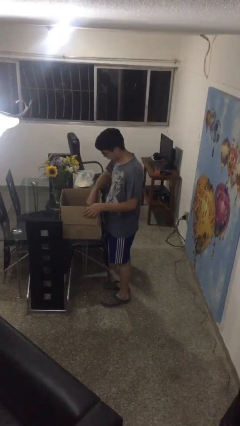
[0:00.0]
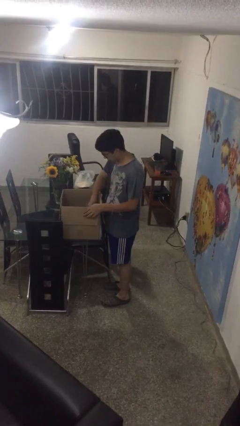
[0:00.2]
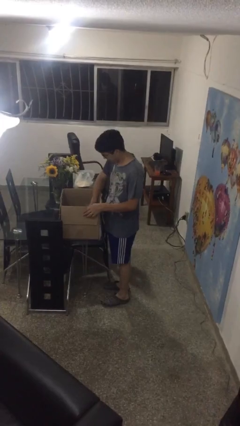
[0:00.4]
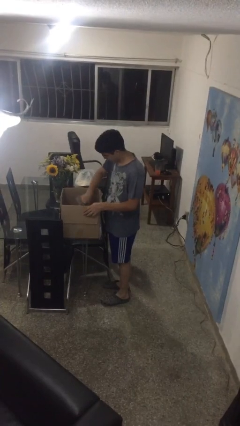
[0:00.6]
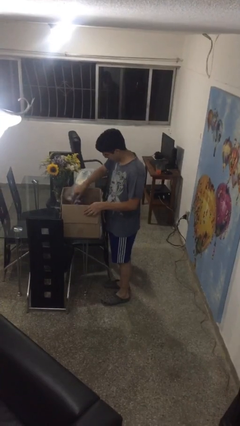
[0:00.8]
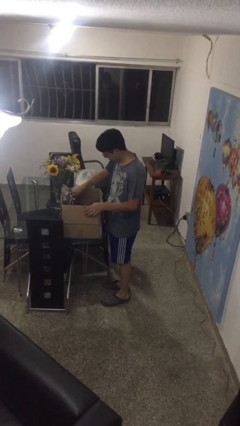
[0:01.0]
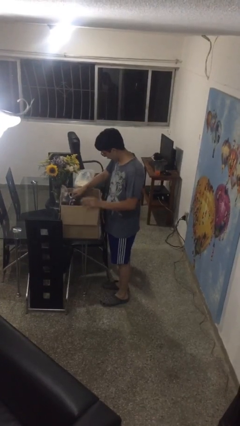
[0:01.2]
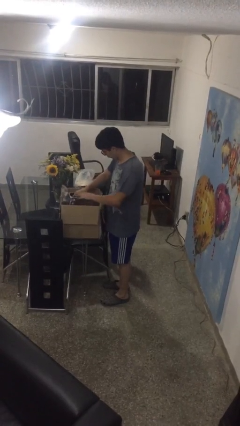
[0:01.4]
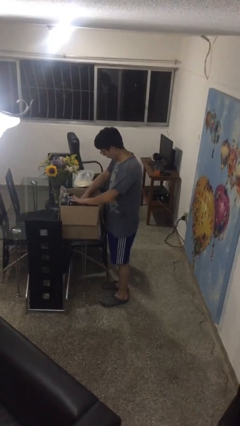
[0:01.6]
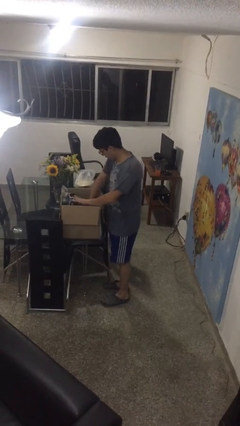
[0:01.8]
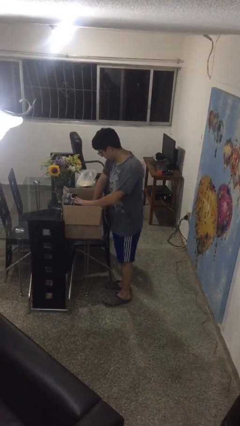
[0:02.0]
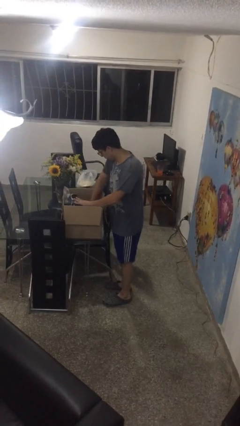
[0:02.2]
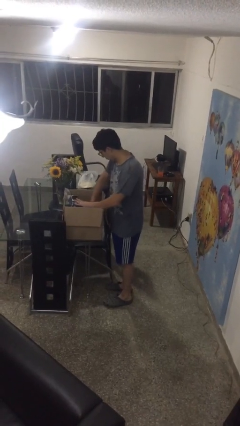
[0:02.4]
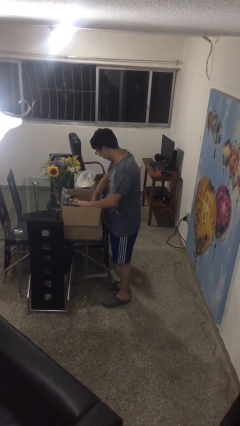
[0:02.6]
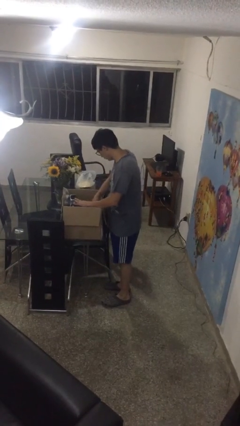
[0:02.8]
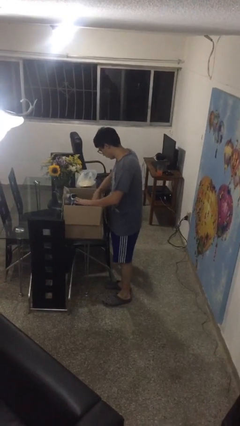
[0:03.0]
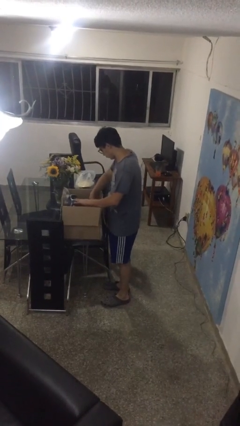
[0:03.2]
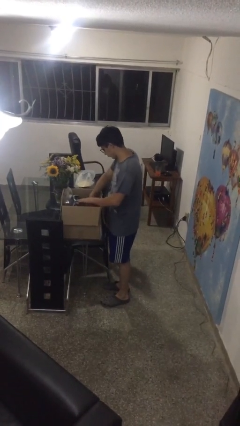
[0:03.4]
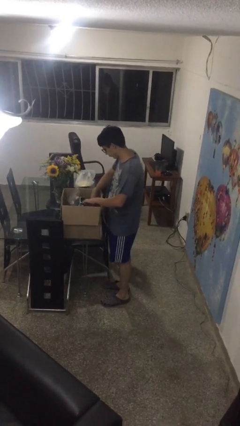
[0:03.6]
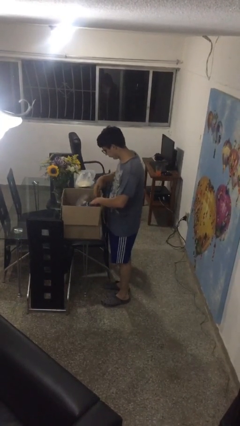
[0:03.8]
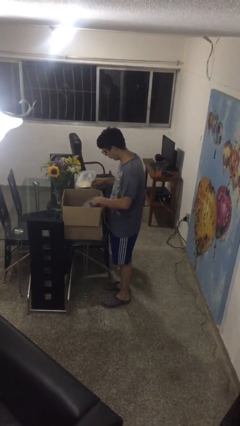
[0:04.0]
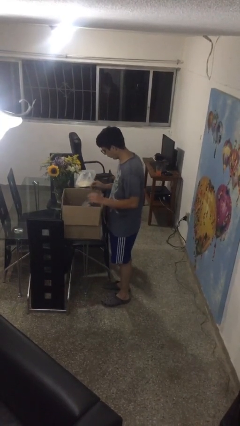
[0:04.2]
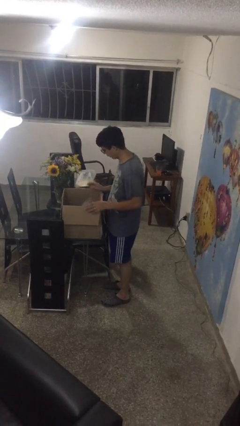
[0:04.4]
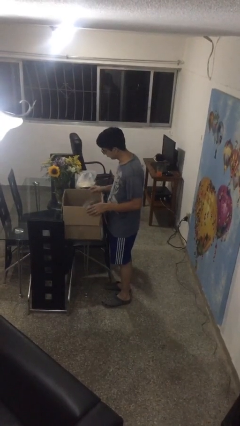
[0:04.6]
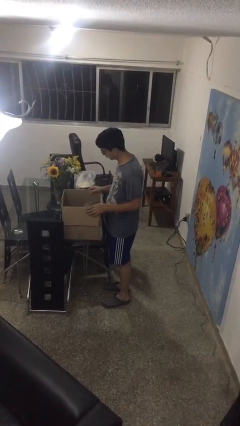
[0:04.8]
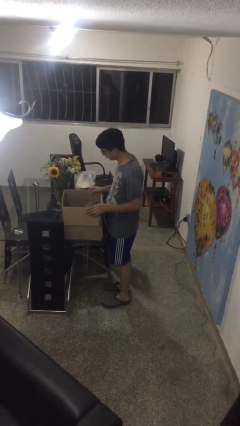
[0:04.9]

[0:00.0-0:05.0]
person searches in box

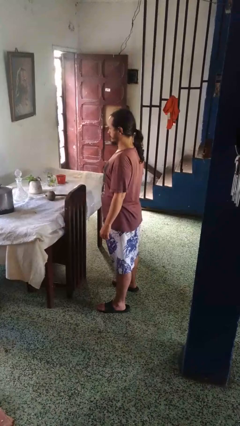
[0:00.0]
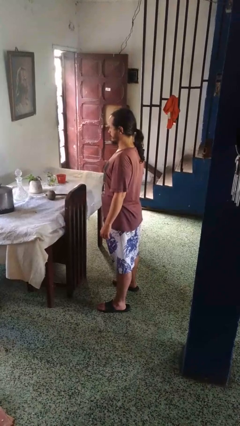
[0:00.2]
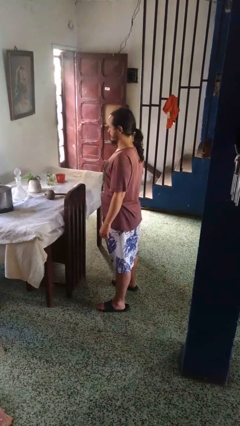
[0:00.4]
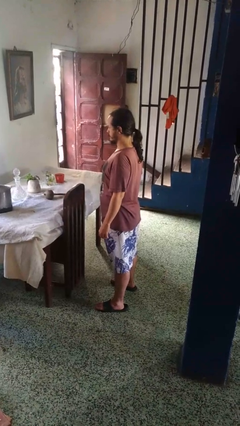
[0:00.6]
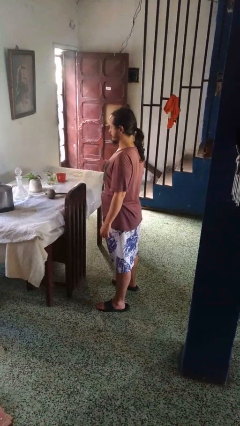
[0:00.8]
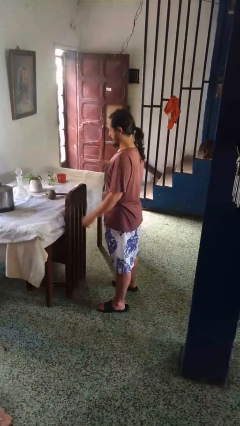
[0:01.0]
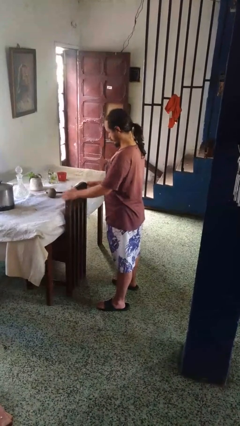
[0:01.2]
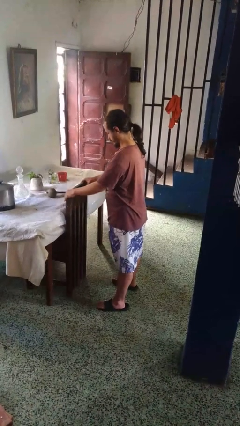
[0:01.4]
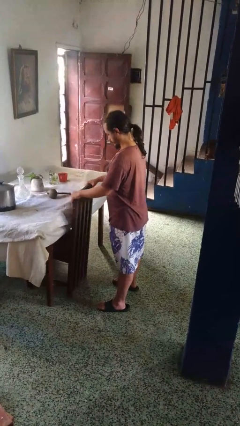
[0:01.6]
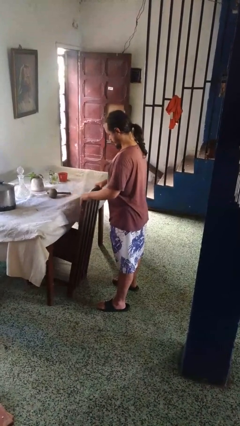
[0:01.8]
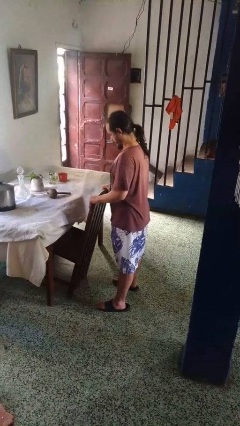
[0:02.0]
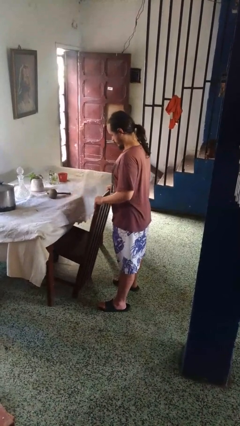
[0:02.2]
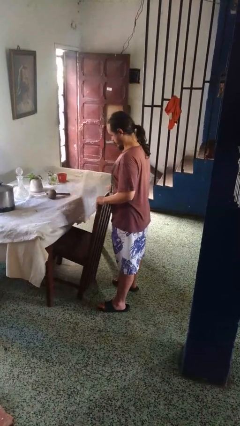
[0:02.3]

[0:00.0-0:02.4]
person pulls out chair

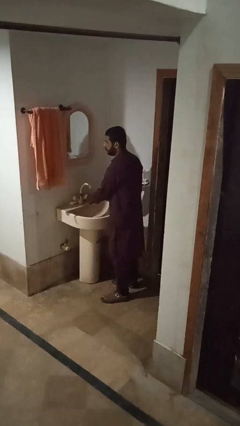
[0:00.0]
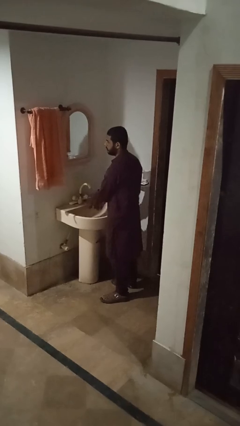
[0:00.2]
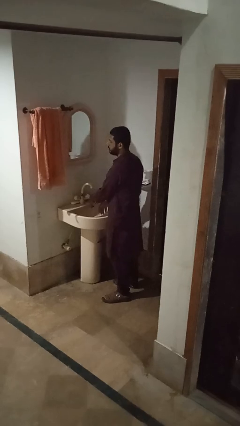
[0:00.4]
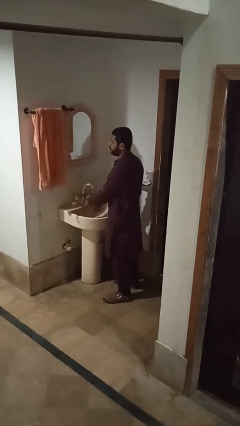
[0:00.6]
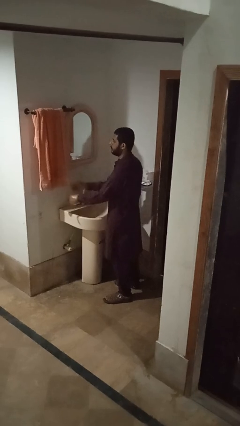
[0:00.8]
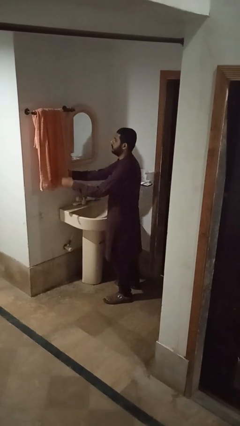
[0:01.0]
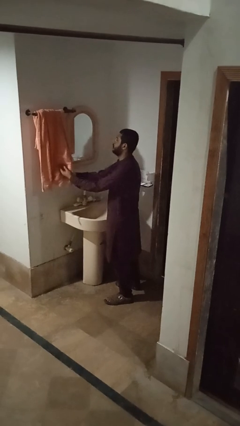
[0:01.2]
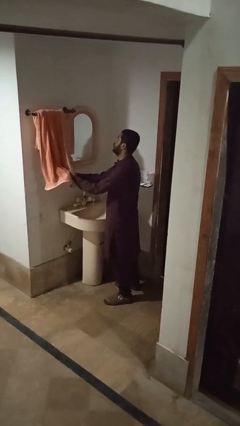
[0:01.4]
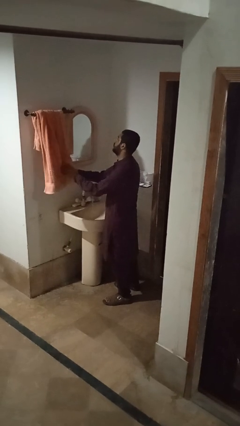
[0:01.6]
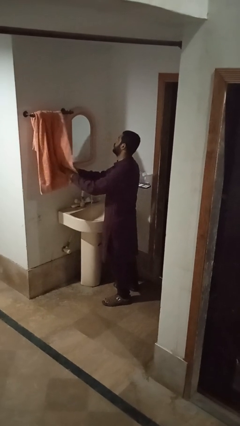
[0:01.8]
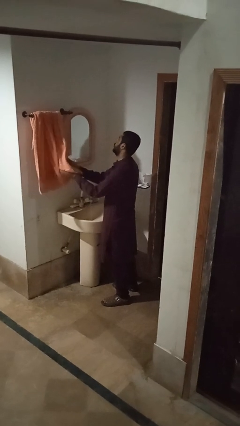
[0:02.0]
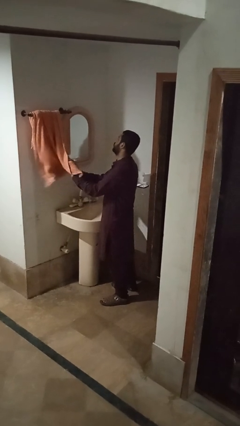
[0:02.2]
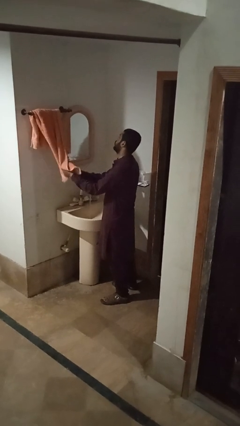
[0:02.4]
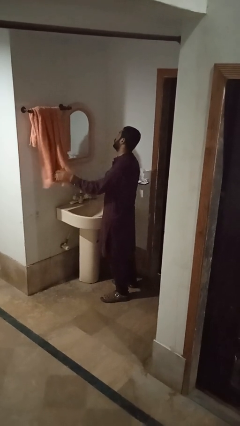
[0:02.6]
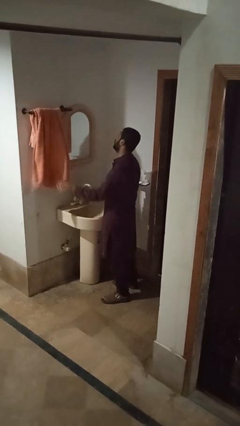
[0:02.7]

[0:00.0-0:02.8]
person dries hands with towel

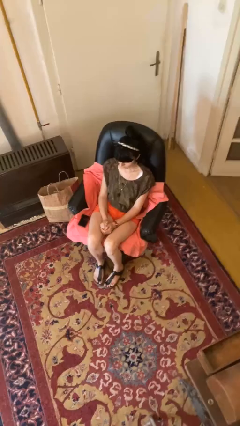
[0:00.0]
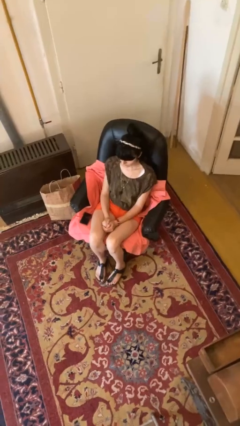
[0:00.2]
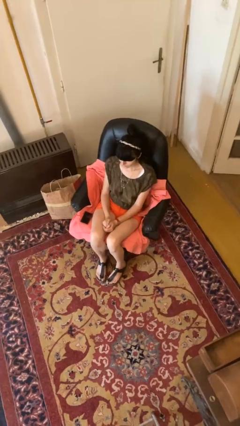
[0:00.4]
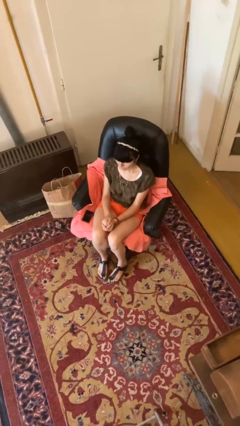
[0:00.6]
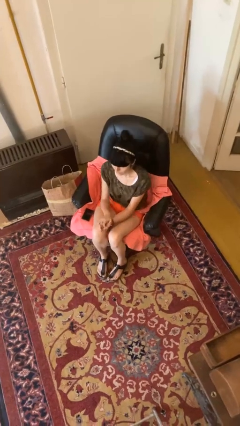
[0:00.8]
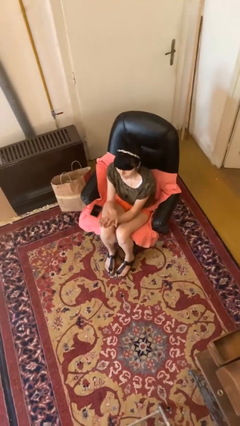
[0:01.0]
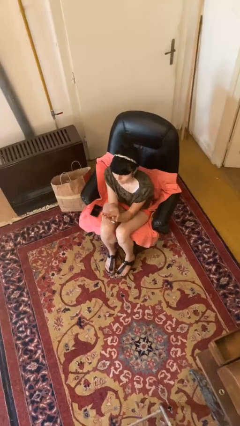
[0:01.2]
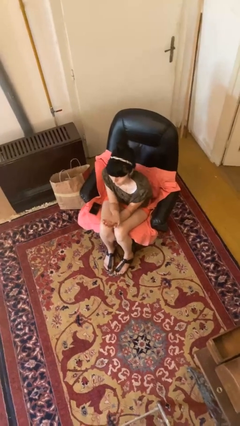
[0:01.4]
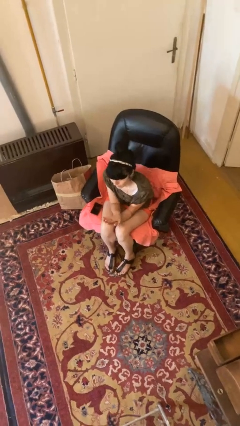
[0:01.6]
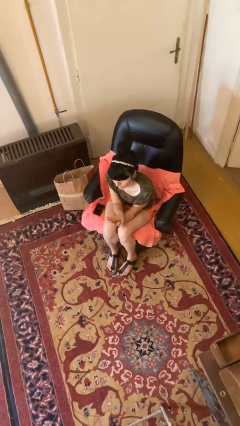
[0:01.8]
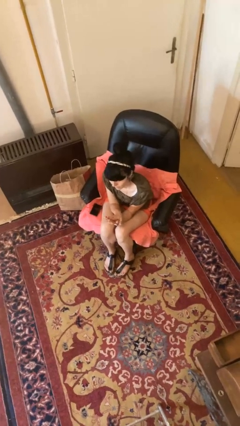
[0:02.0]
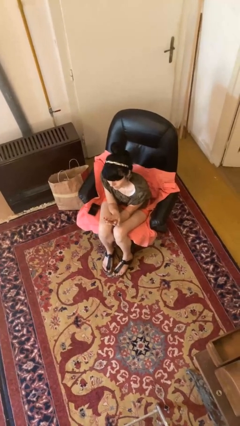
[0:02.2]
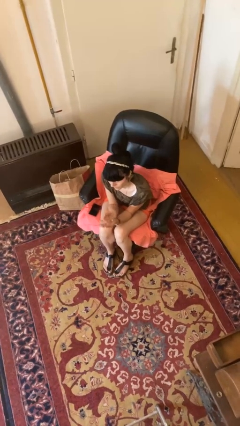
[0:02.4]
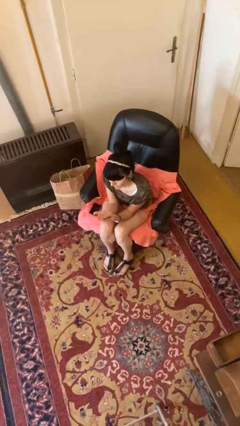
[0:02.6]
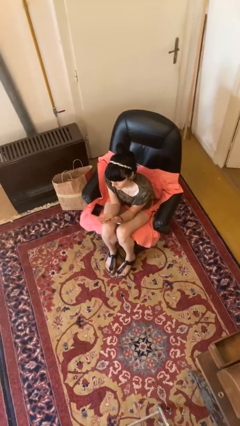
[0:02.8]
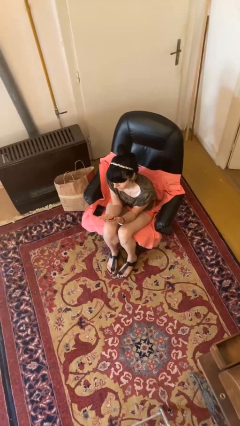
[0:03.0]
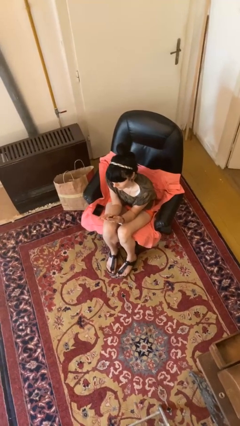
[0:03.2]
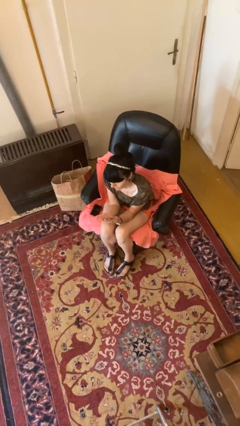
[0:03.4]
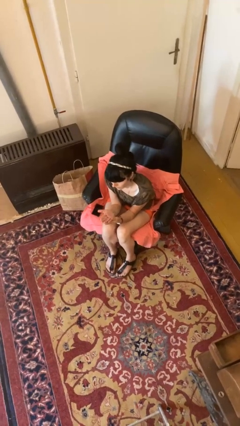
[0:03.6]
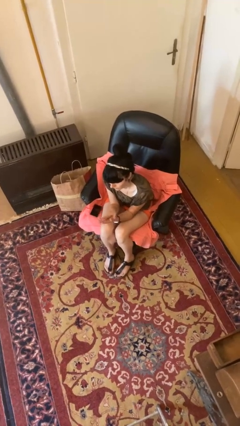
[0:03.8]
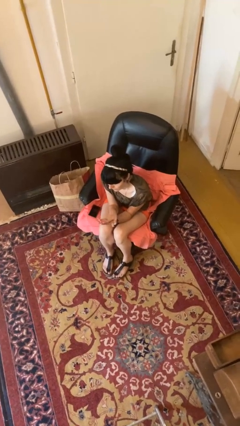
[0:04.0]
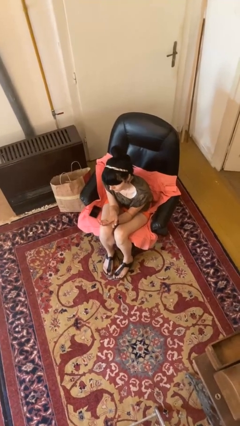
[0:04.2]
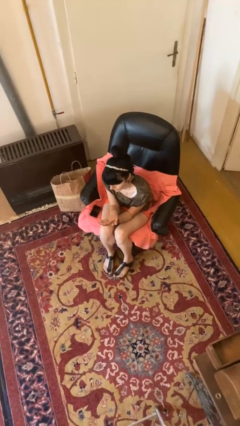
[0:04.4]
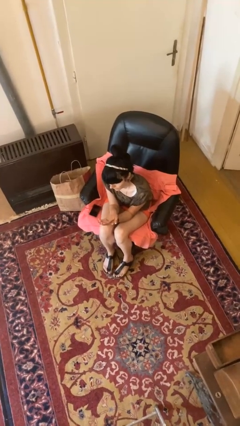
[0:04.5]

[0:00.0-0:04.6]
person looks at hands in lap

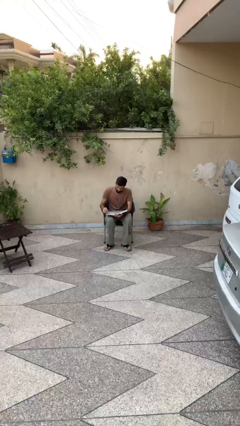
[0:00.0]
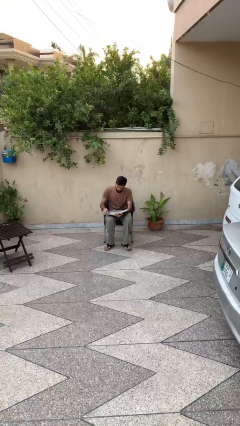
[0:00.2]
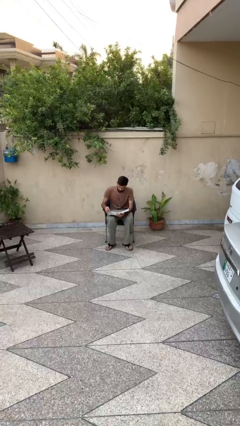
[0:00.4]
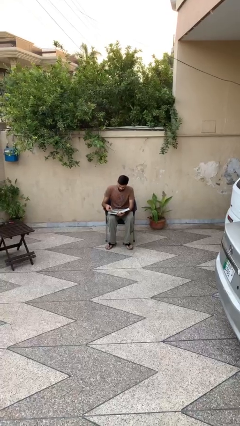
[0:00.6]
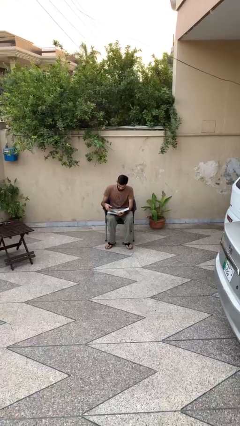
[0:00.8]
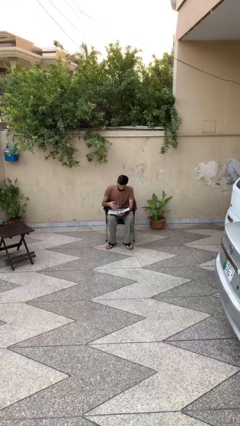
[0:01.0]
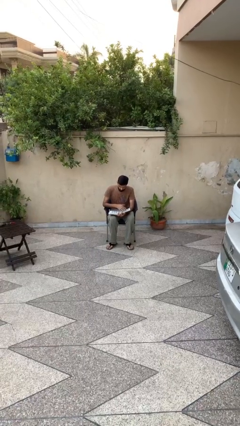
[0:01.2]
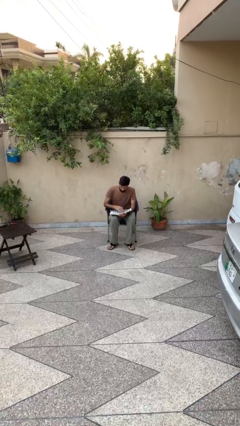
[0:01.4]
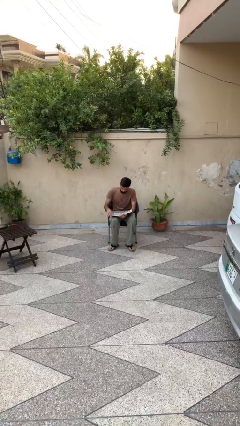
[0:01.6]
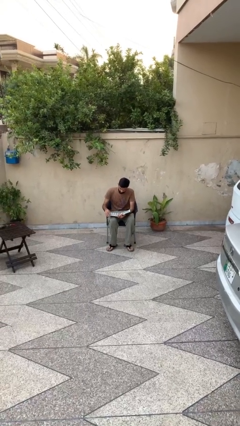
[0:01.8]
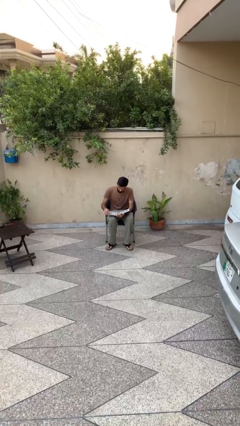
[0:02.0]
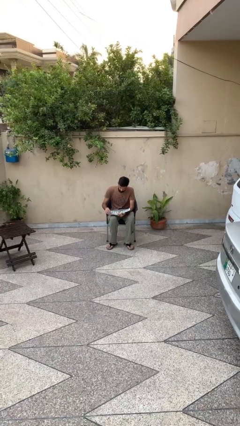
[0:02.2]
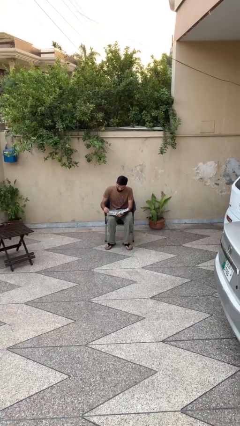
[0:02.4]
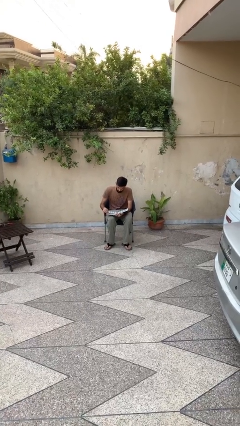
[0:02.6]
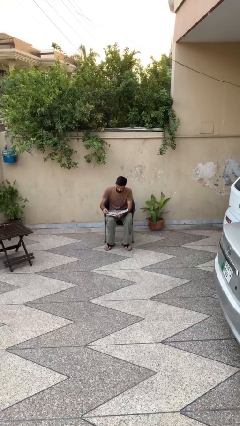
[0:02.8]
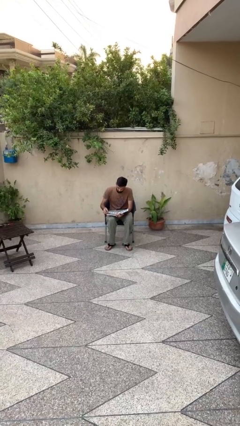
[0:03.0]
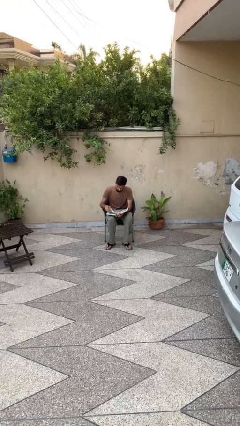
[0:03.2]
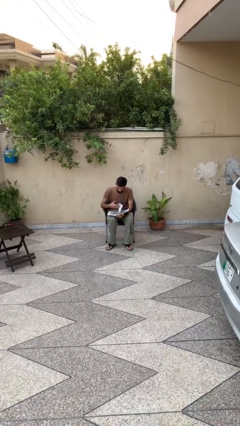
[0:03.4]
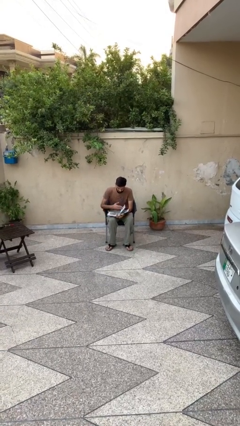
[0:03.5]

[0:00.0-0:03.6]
person reads document
